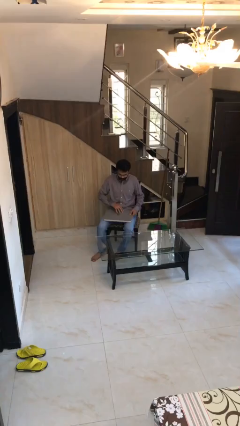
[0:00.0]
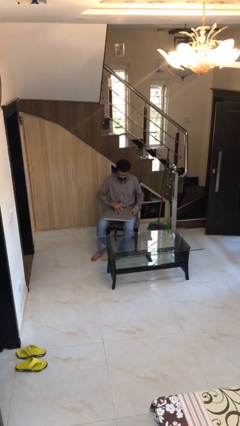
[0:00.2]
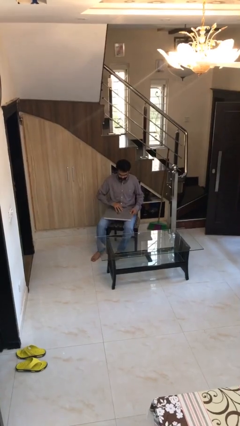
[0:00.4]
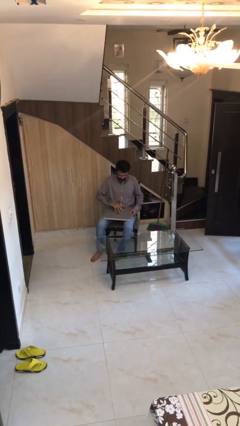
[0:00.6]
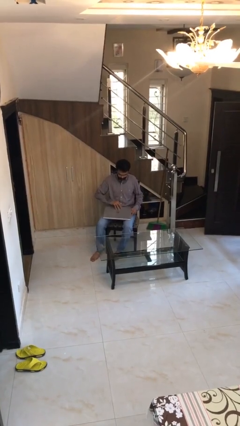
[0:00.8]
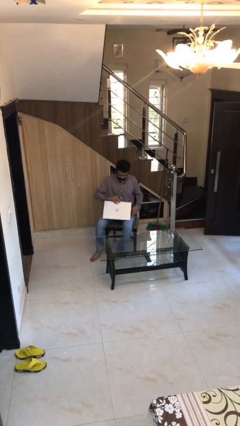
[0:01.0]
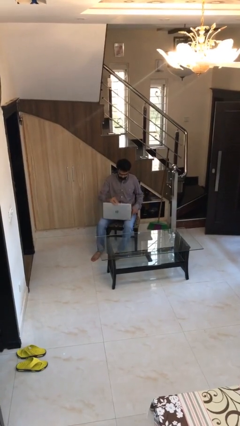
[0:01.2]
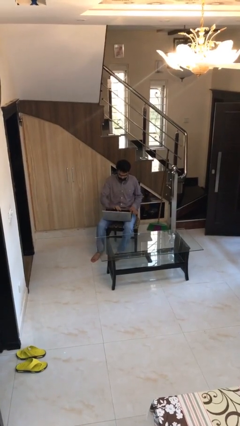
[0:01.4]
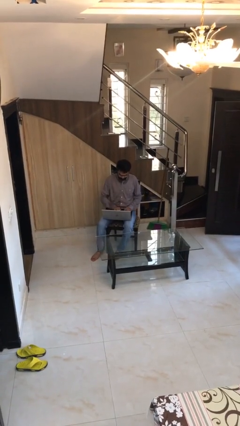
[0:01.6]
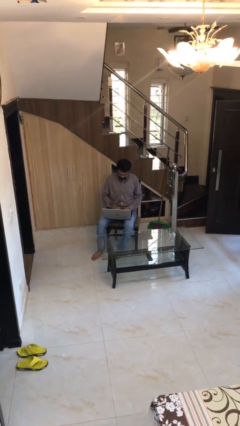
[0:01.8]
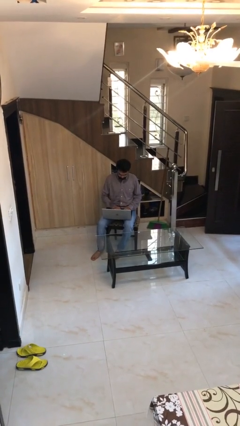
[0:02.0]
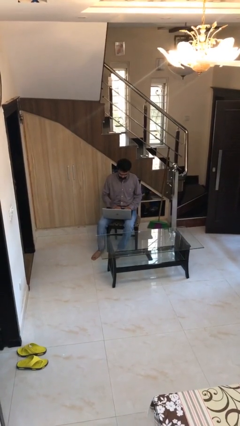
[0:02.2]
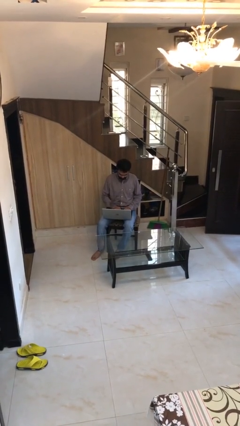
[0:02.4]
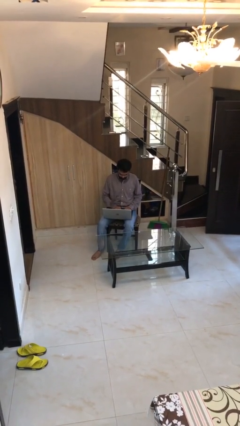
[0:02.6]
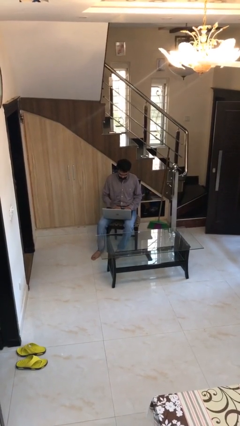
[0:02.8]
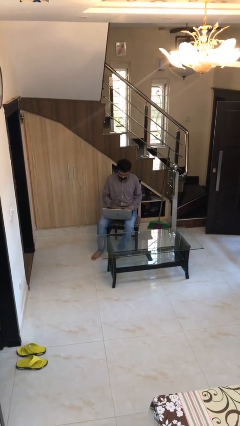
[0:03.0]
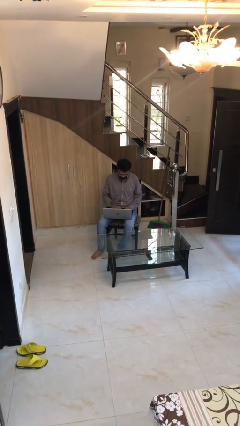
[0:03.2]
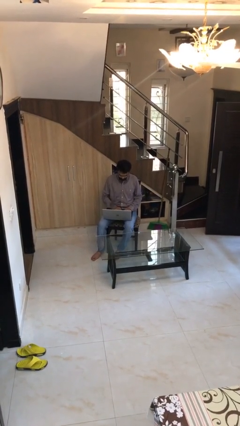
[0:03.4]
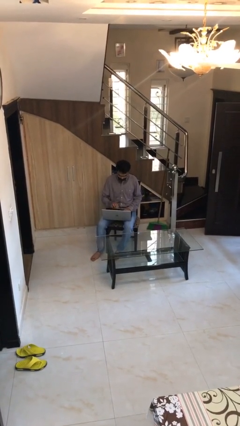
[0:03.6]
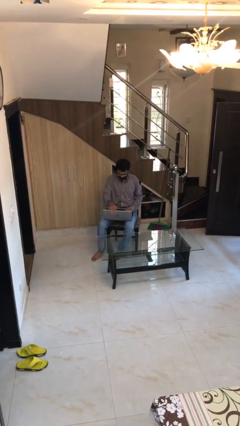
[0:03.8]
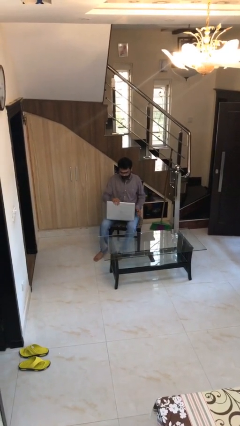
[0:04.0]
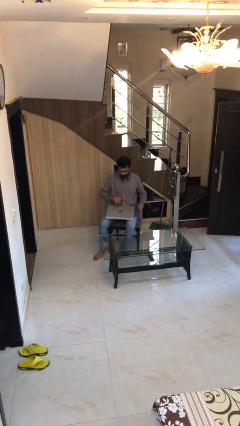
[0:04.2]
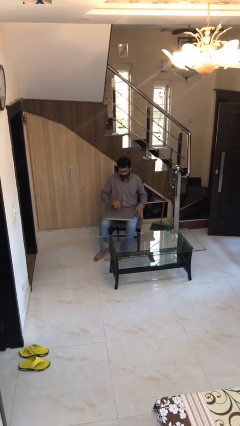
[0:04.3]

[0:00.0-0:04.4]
person interacts with laptop

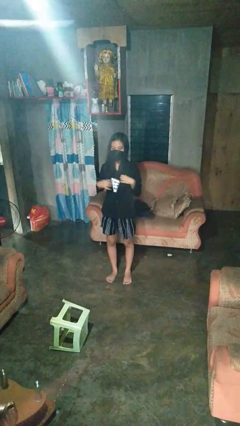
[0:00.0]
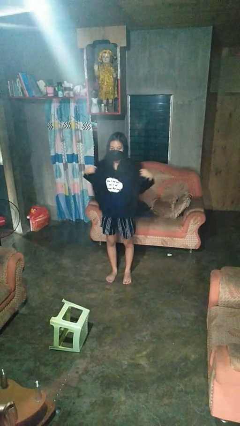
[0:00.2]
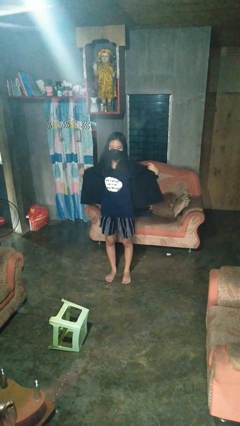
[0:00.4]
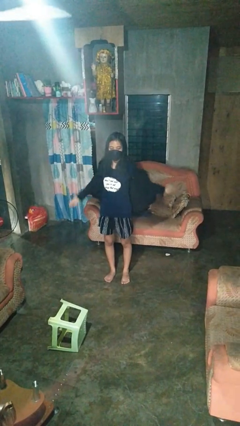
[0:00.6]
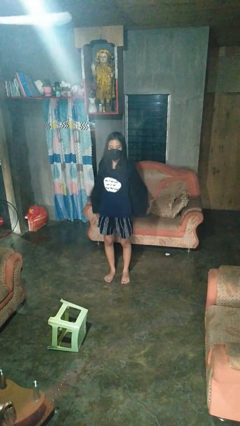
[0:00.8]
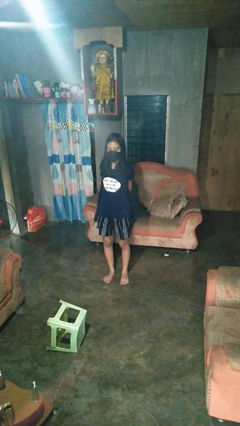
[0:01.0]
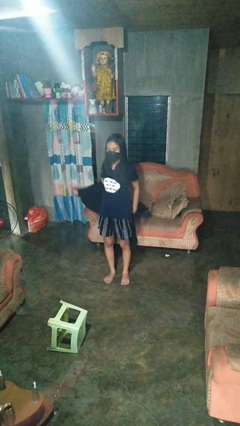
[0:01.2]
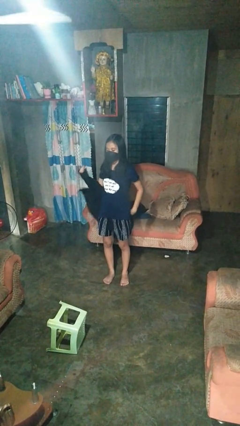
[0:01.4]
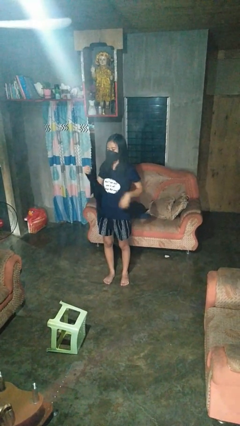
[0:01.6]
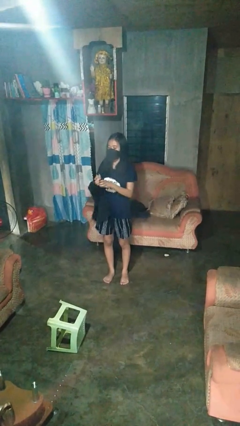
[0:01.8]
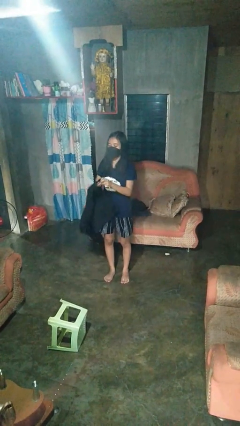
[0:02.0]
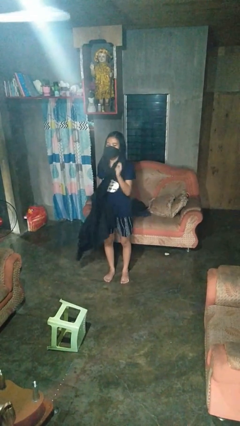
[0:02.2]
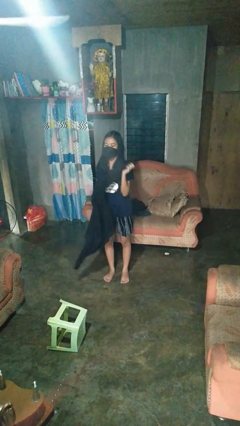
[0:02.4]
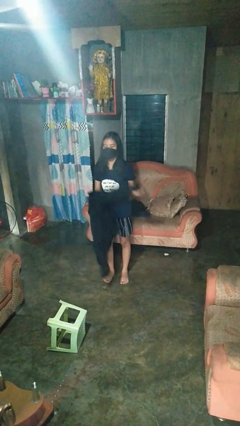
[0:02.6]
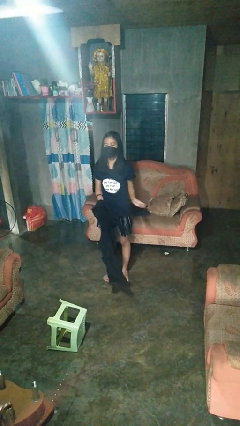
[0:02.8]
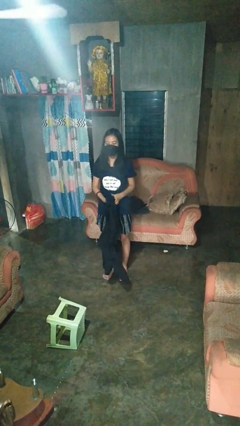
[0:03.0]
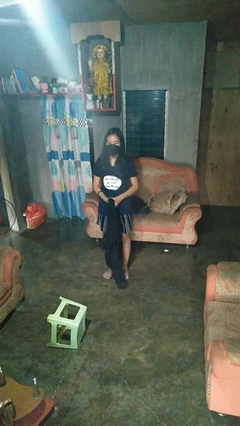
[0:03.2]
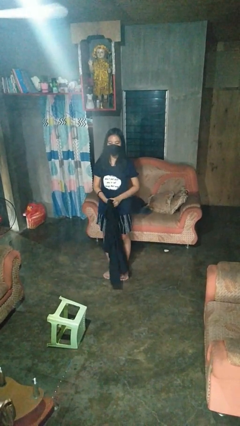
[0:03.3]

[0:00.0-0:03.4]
person takes off shirt

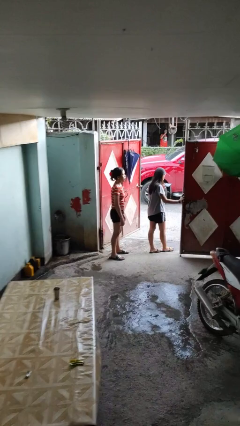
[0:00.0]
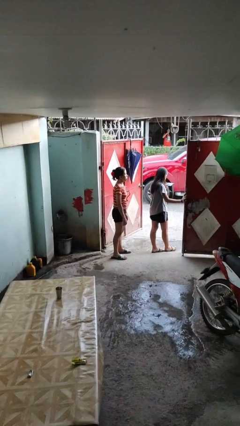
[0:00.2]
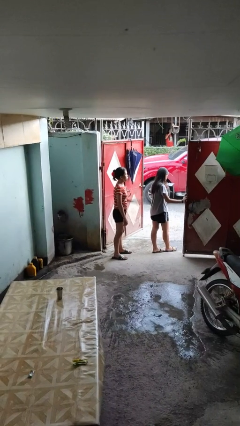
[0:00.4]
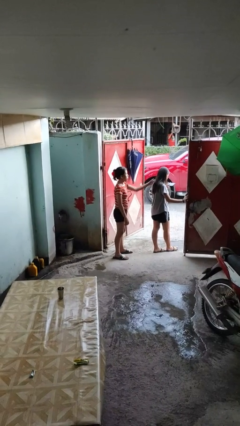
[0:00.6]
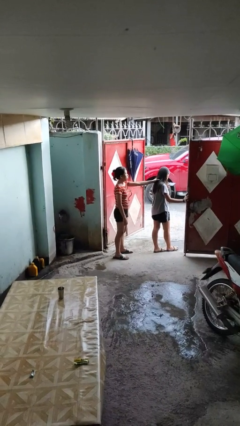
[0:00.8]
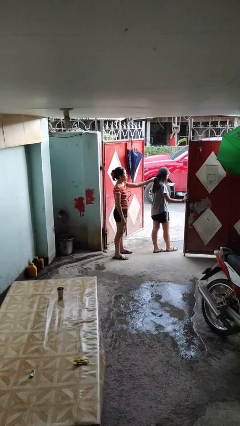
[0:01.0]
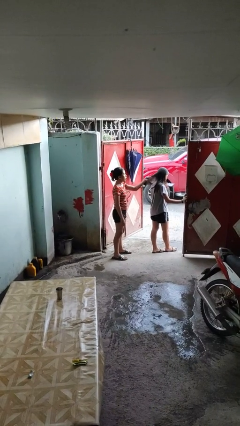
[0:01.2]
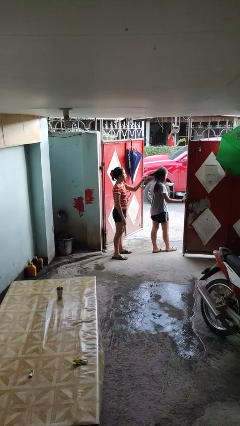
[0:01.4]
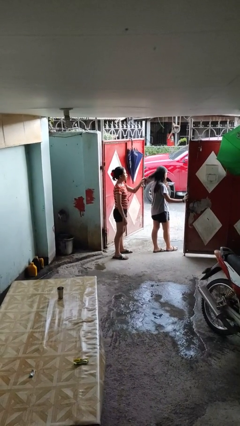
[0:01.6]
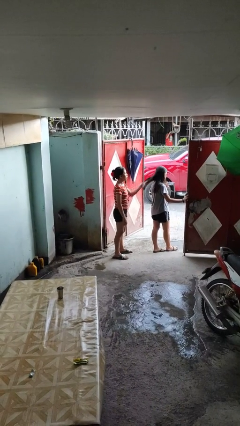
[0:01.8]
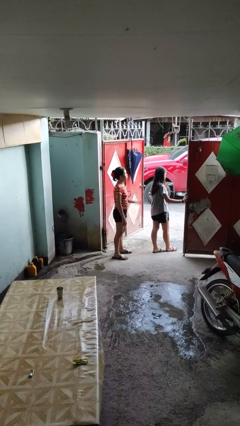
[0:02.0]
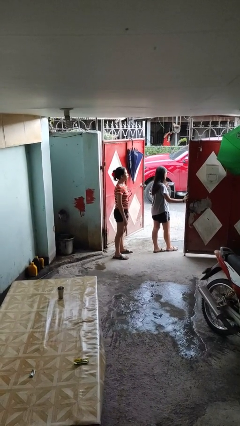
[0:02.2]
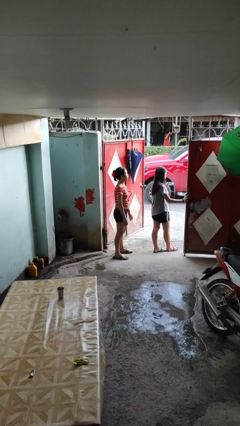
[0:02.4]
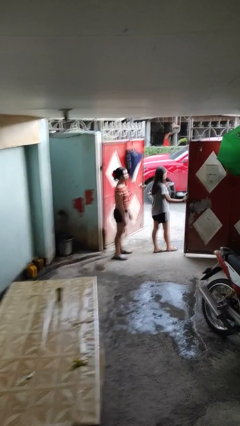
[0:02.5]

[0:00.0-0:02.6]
person grabs person by hair

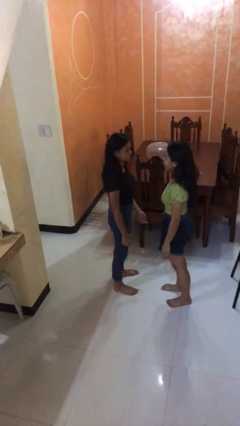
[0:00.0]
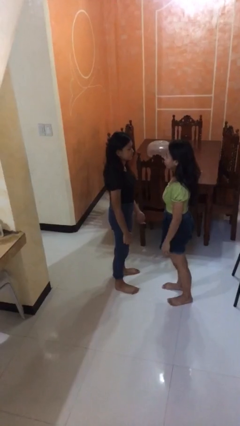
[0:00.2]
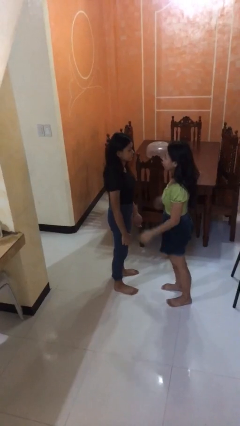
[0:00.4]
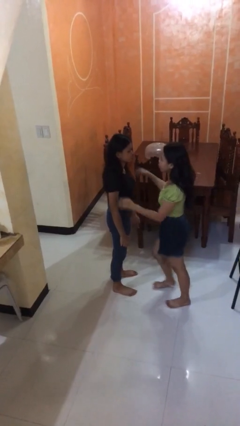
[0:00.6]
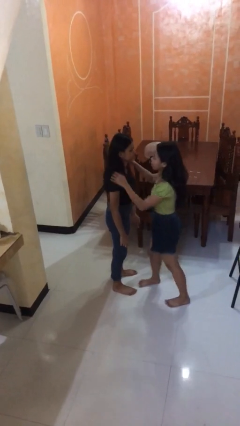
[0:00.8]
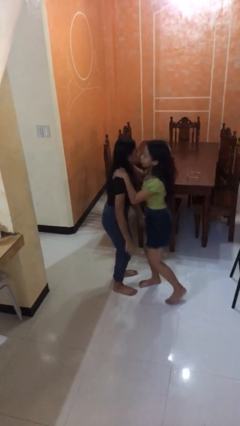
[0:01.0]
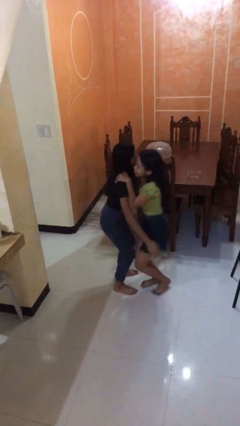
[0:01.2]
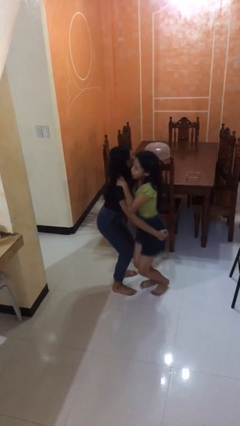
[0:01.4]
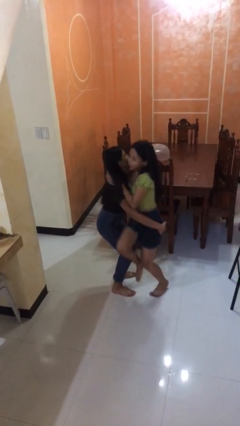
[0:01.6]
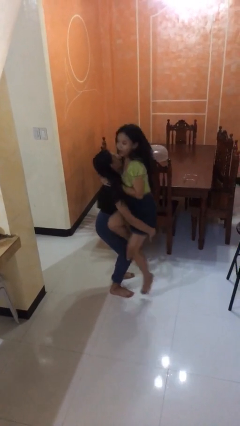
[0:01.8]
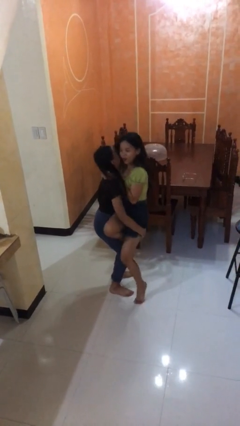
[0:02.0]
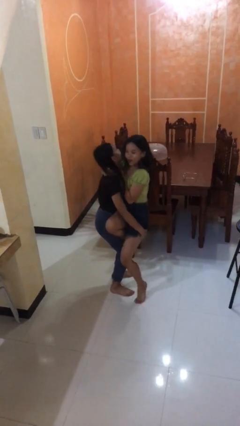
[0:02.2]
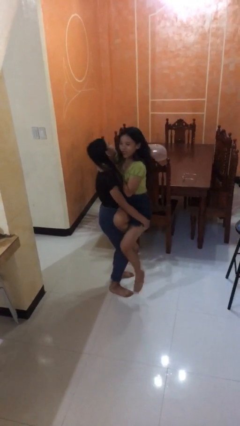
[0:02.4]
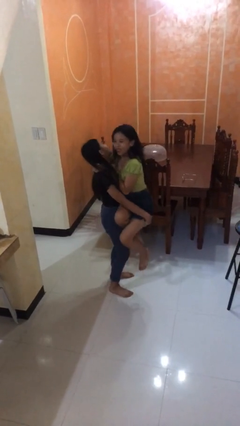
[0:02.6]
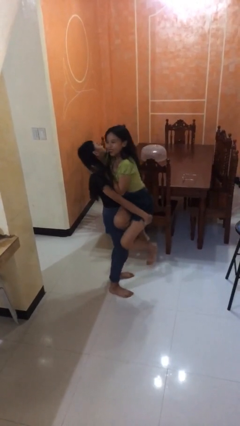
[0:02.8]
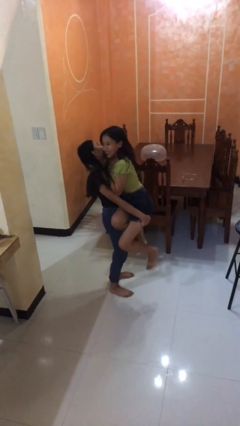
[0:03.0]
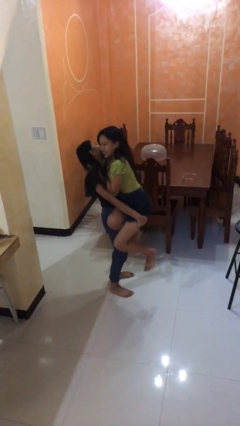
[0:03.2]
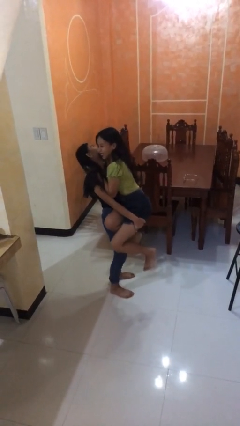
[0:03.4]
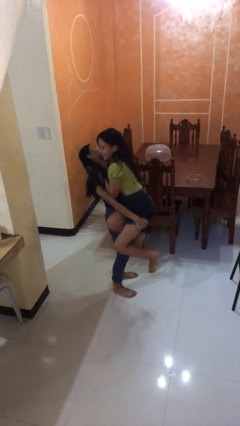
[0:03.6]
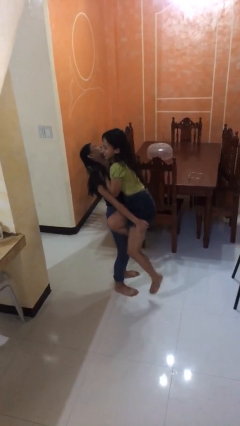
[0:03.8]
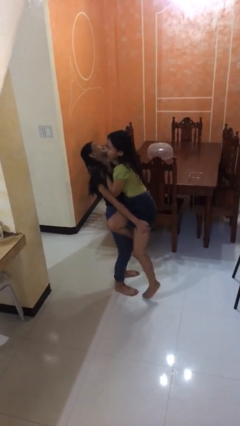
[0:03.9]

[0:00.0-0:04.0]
person picks up person

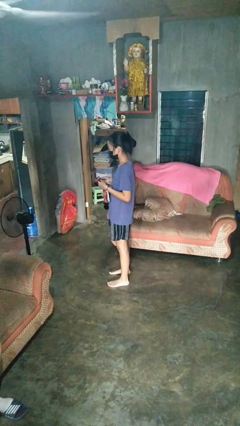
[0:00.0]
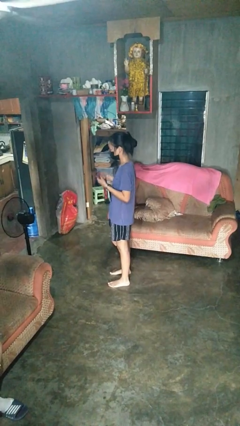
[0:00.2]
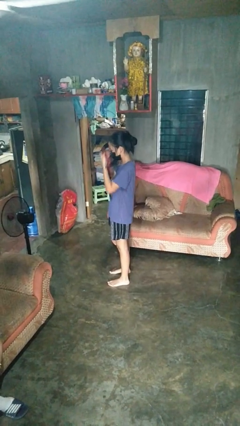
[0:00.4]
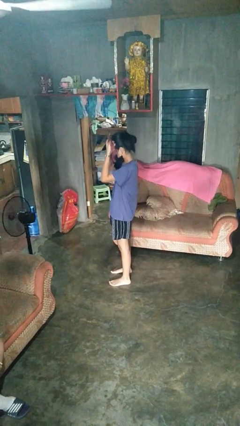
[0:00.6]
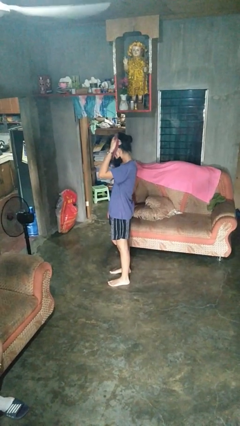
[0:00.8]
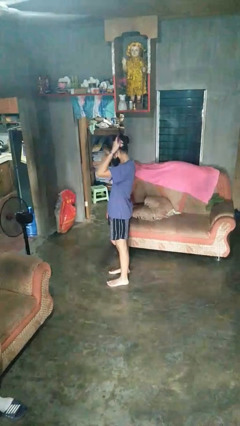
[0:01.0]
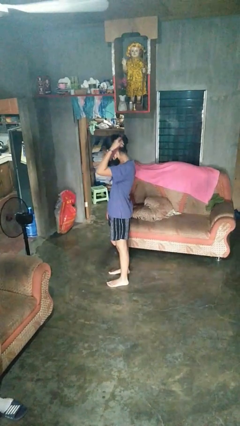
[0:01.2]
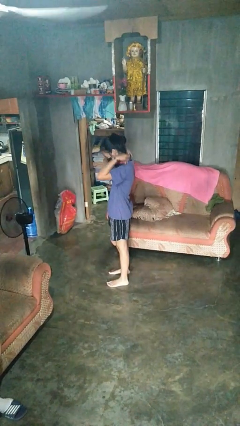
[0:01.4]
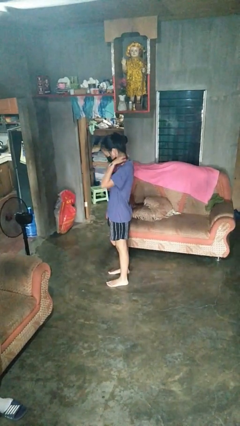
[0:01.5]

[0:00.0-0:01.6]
person puts on necklace

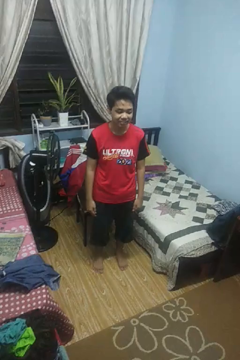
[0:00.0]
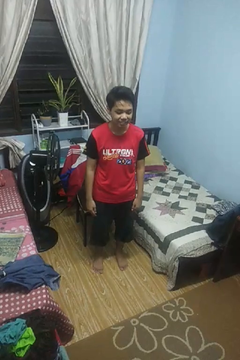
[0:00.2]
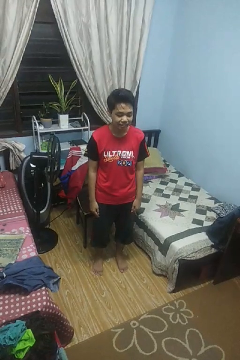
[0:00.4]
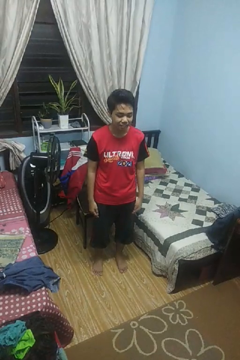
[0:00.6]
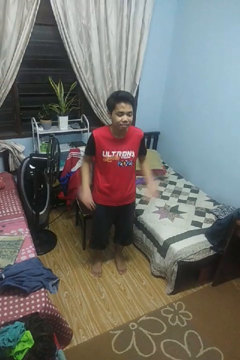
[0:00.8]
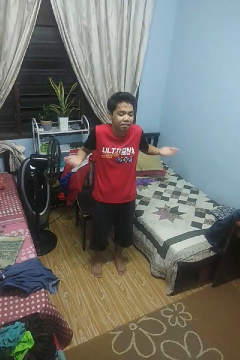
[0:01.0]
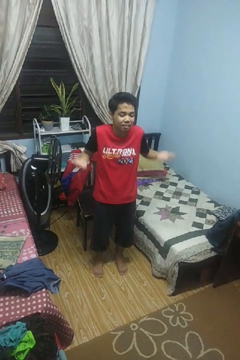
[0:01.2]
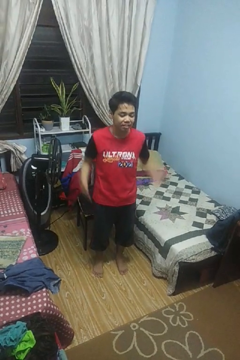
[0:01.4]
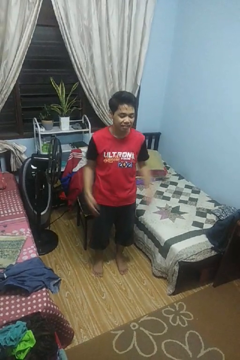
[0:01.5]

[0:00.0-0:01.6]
person shrugs
